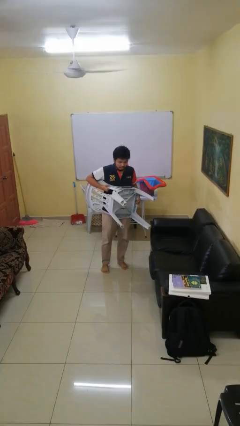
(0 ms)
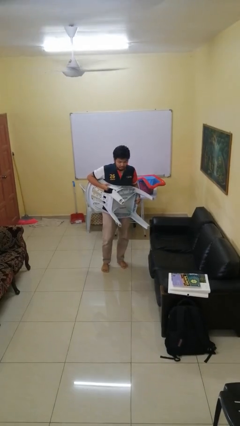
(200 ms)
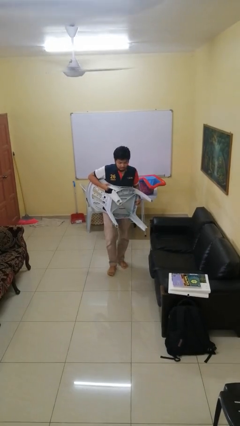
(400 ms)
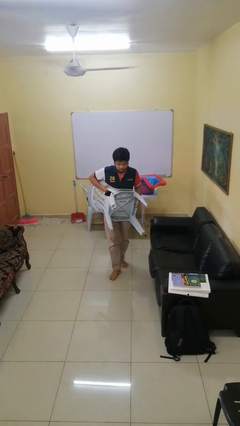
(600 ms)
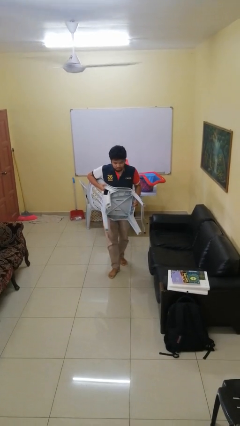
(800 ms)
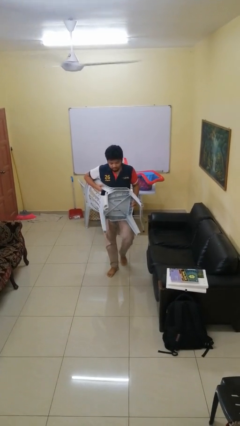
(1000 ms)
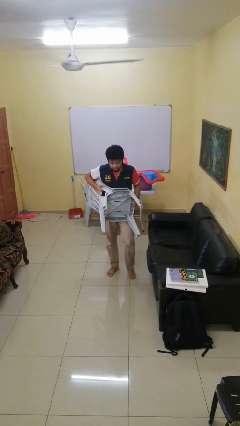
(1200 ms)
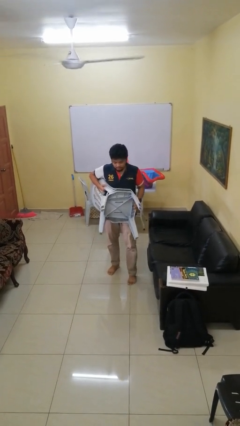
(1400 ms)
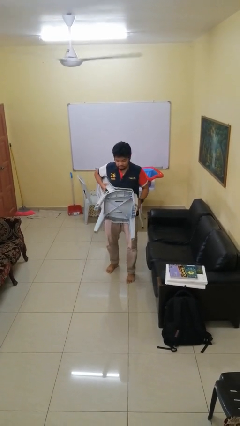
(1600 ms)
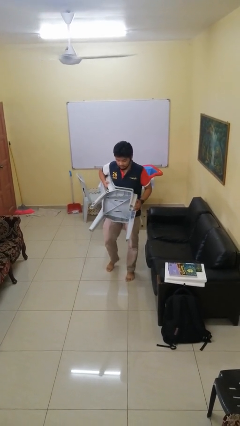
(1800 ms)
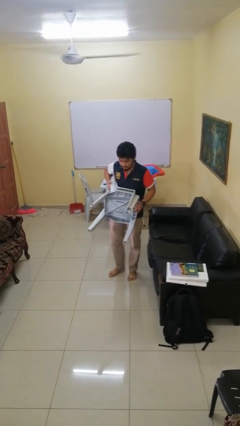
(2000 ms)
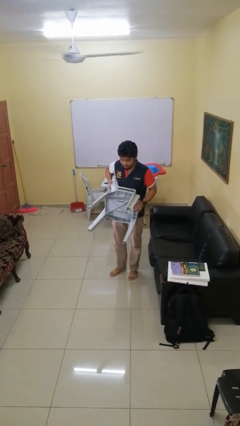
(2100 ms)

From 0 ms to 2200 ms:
person carries furniture

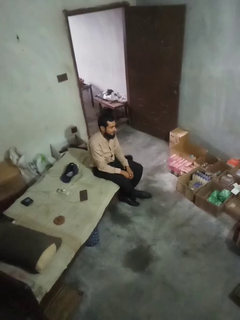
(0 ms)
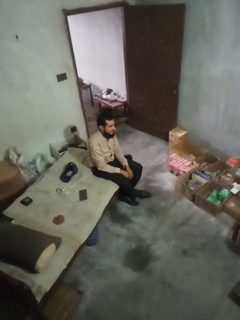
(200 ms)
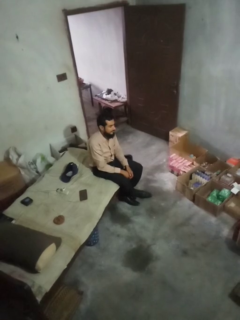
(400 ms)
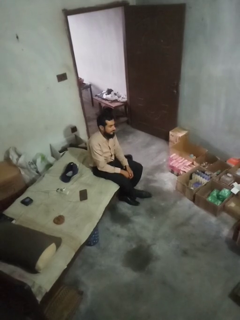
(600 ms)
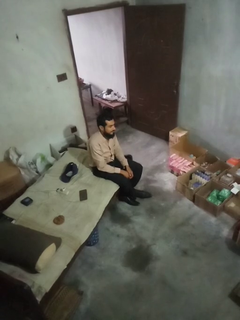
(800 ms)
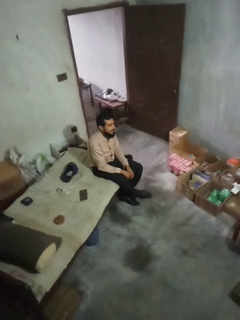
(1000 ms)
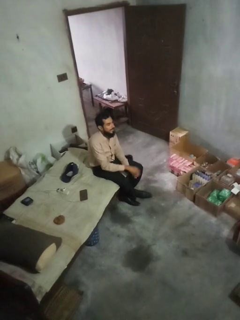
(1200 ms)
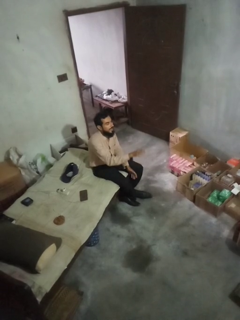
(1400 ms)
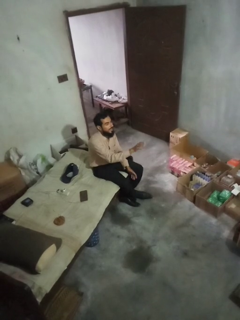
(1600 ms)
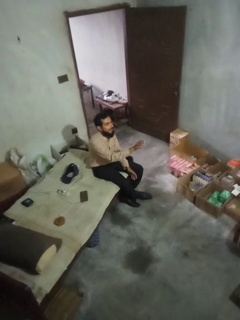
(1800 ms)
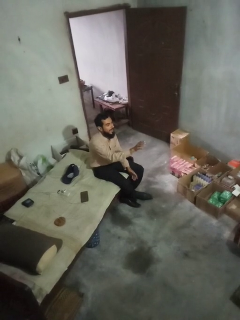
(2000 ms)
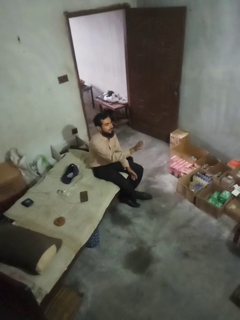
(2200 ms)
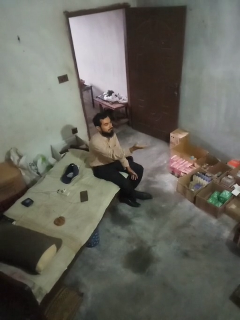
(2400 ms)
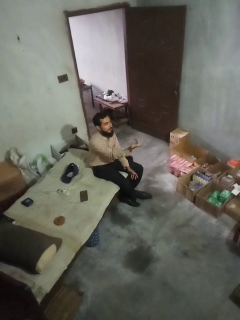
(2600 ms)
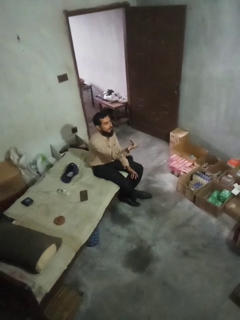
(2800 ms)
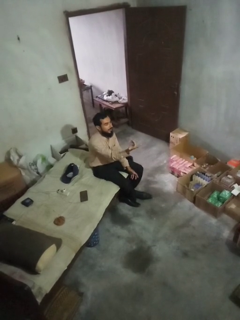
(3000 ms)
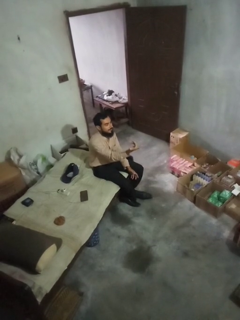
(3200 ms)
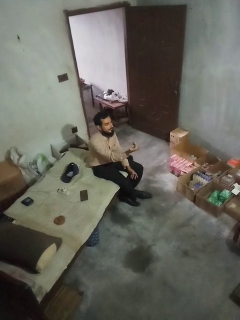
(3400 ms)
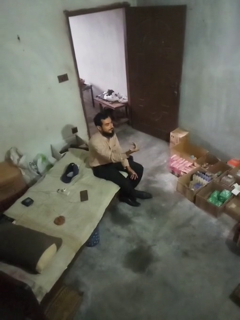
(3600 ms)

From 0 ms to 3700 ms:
person gestures raise hand

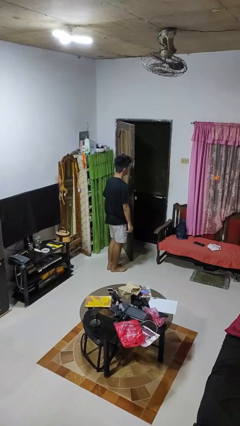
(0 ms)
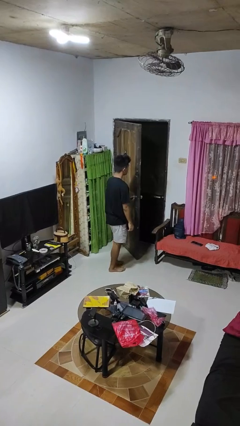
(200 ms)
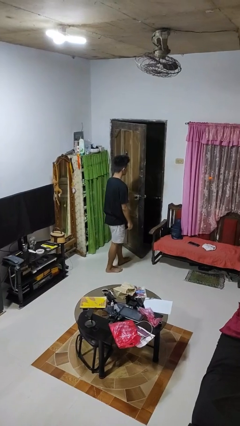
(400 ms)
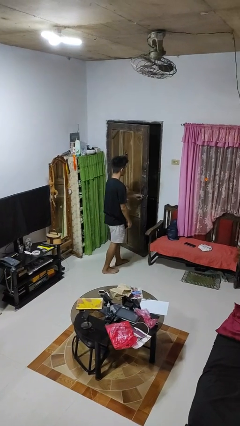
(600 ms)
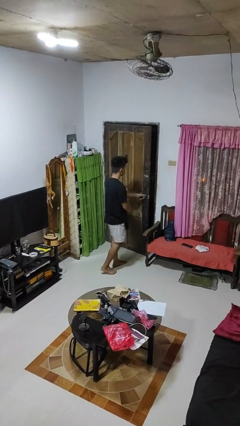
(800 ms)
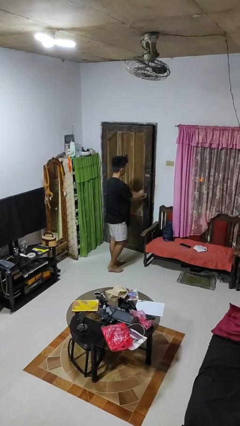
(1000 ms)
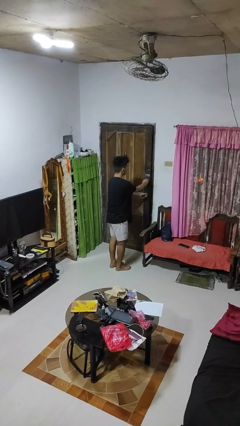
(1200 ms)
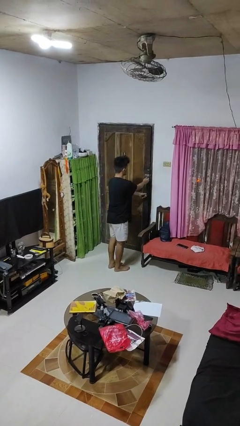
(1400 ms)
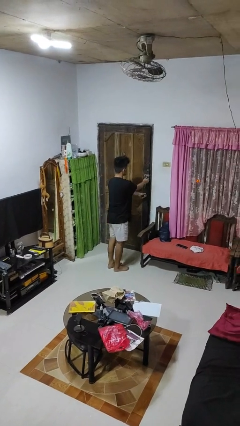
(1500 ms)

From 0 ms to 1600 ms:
person closes facility door

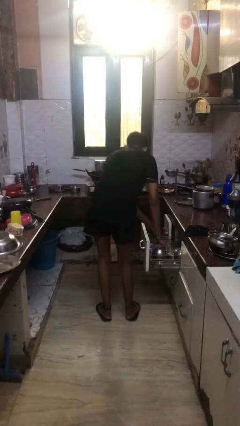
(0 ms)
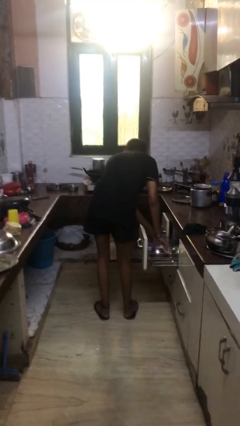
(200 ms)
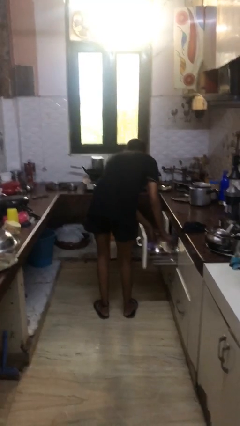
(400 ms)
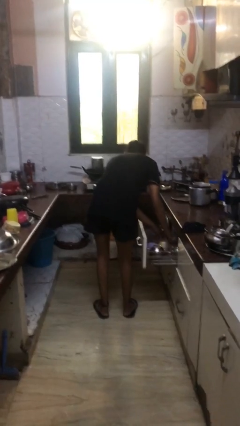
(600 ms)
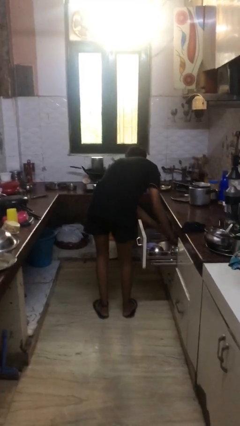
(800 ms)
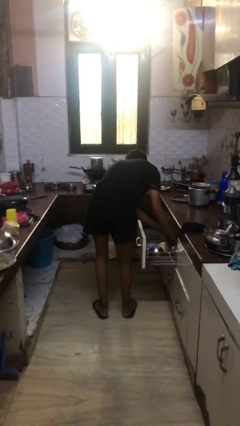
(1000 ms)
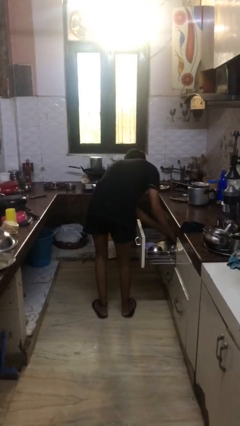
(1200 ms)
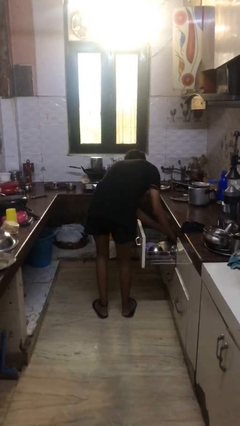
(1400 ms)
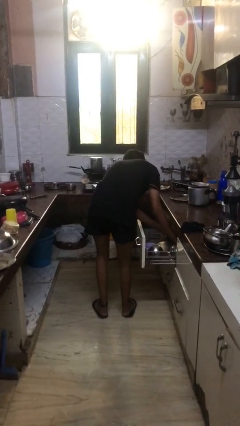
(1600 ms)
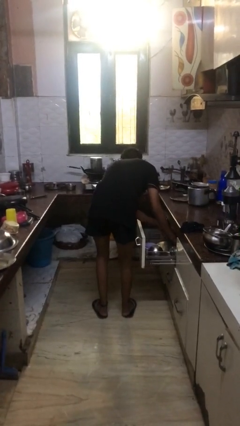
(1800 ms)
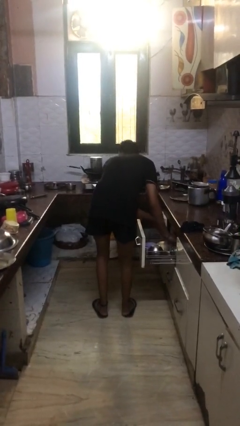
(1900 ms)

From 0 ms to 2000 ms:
person searches in kitchen drawer

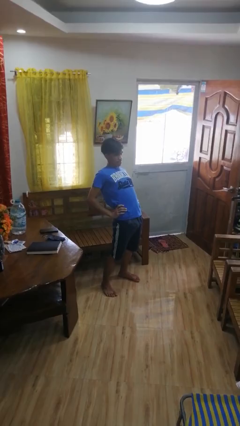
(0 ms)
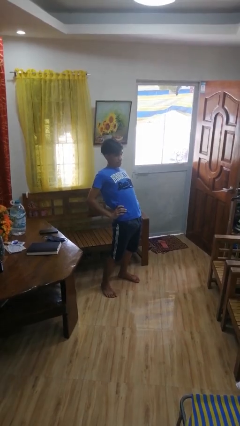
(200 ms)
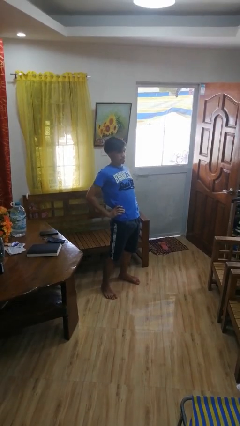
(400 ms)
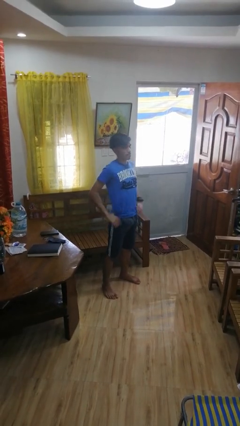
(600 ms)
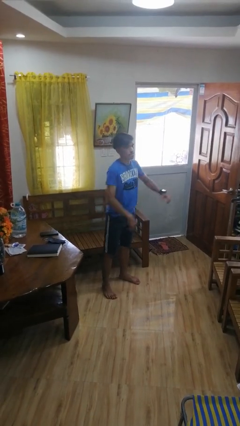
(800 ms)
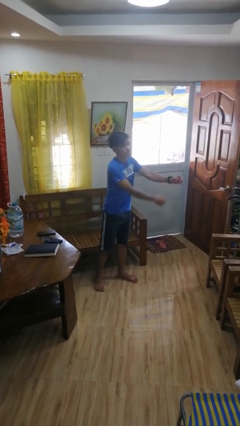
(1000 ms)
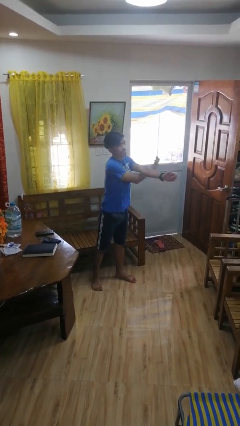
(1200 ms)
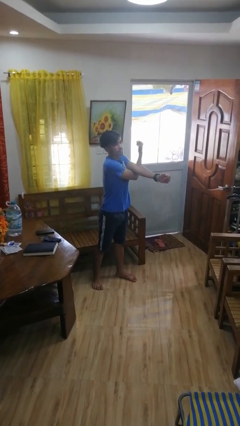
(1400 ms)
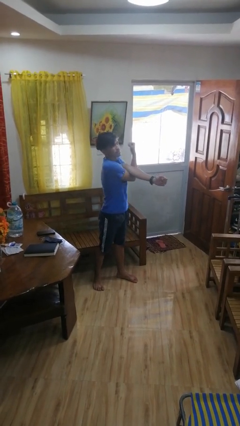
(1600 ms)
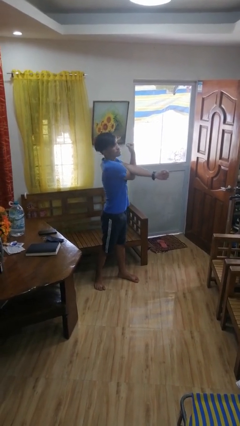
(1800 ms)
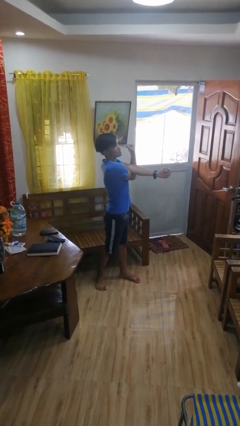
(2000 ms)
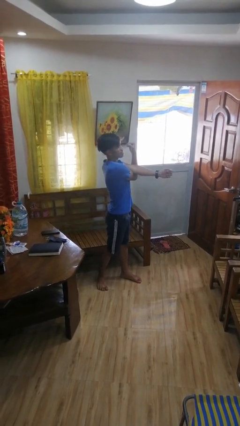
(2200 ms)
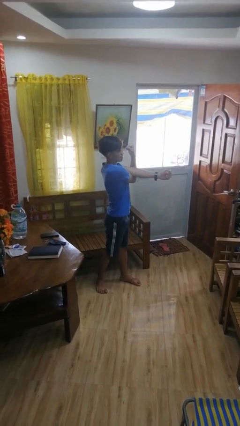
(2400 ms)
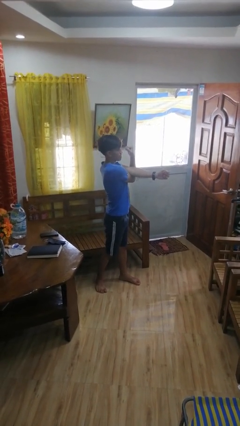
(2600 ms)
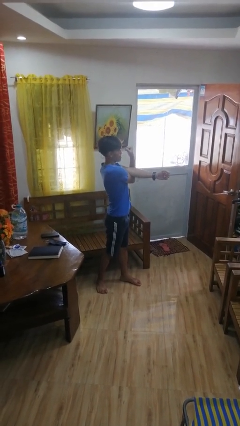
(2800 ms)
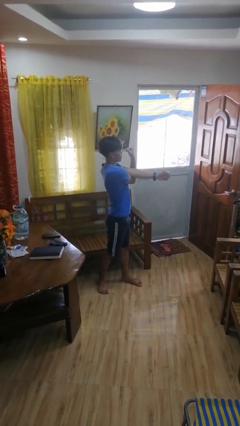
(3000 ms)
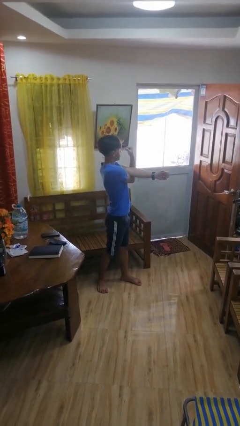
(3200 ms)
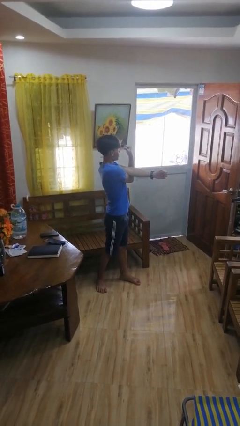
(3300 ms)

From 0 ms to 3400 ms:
person stretches arms to side

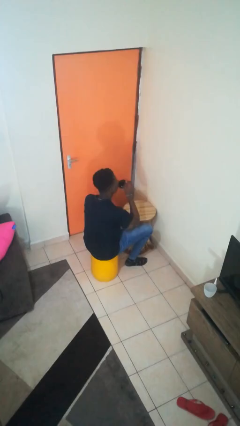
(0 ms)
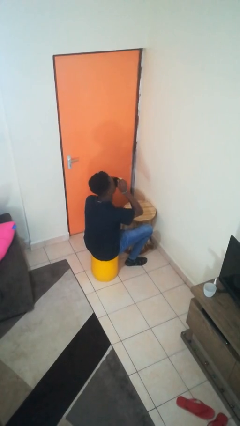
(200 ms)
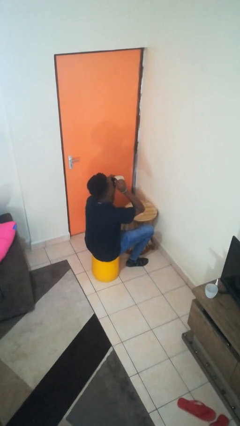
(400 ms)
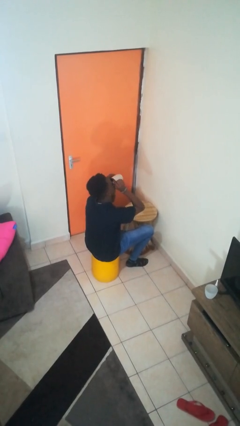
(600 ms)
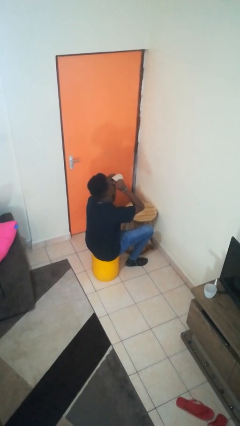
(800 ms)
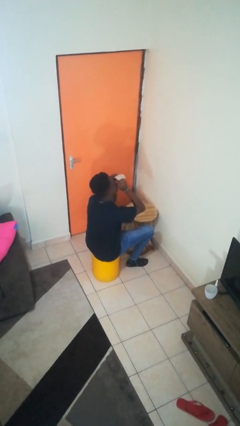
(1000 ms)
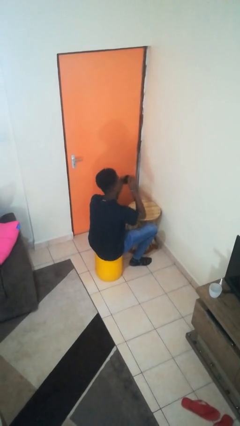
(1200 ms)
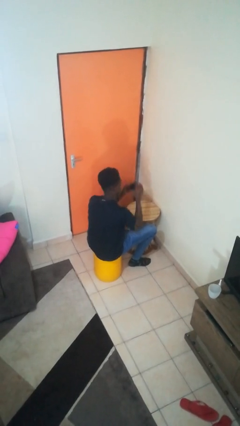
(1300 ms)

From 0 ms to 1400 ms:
person drinks from mug

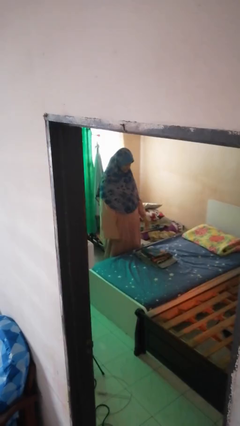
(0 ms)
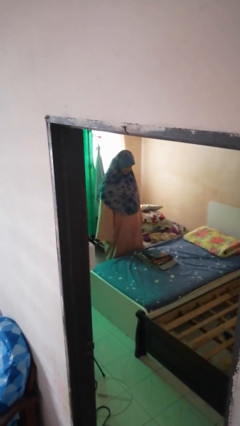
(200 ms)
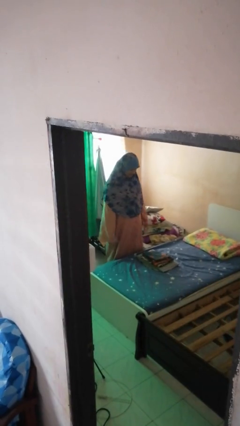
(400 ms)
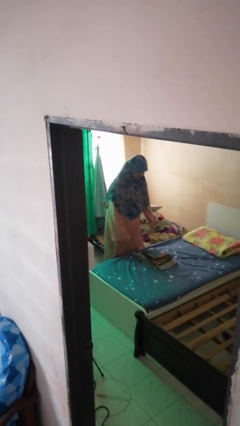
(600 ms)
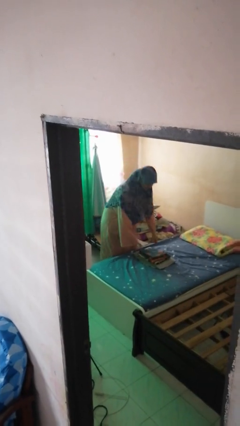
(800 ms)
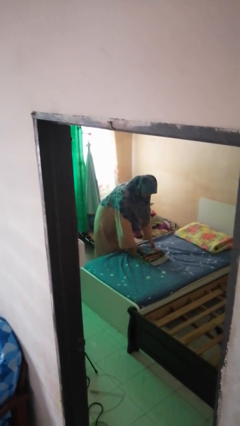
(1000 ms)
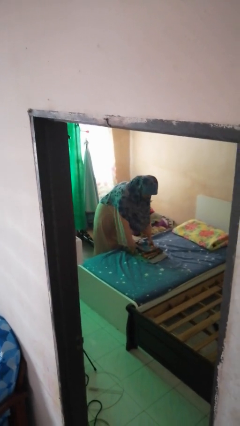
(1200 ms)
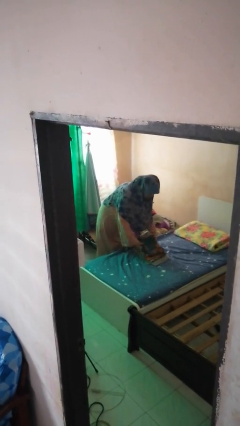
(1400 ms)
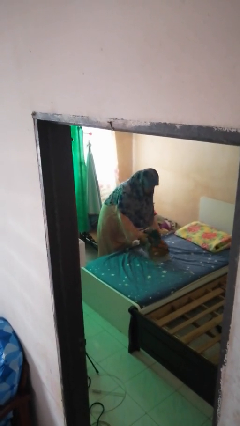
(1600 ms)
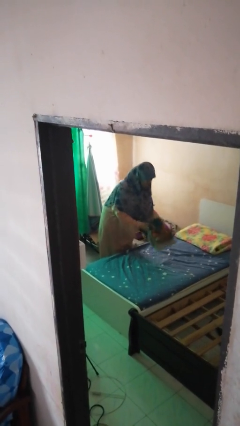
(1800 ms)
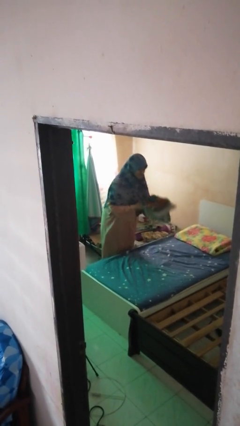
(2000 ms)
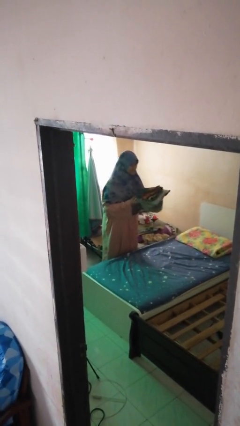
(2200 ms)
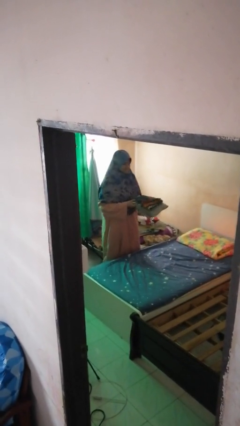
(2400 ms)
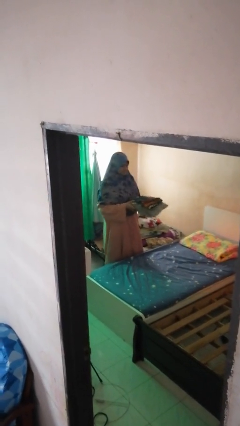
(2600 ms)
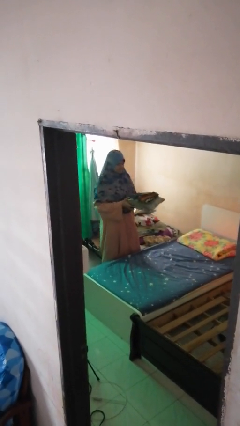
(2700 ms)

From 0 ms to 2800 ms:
person picks up object from bed

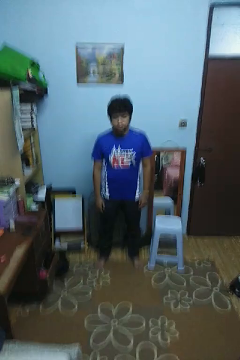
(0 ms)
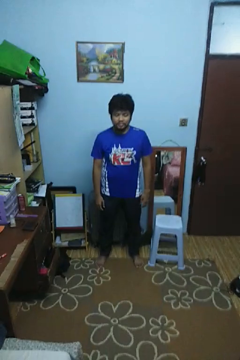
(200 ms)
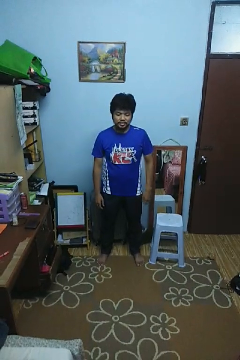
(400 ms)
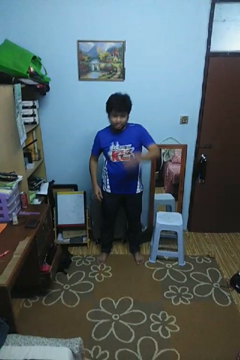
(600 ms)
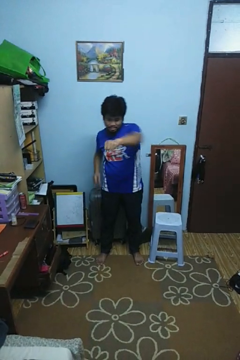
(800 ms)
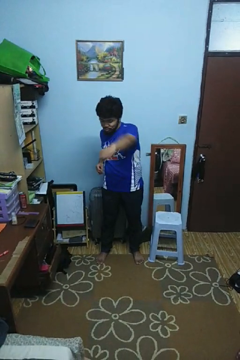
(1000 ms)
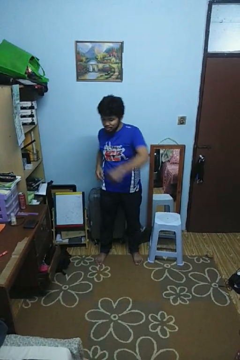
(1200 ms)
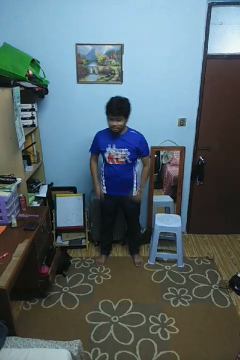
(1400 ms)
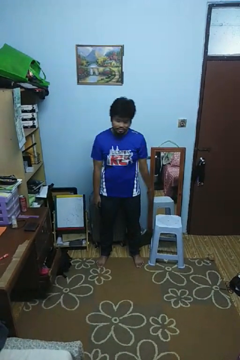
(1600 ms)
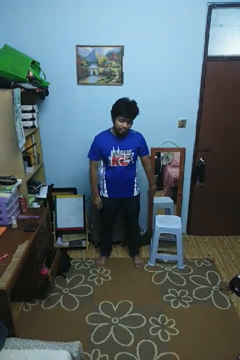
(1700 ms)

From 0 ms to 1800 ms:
person punches
